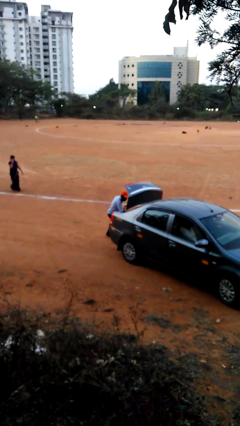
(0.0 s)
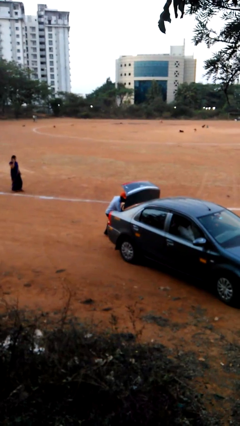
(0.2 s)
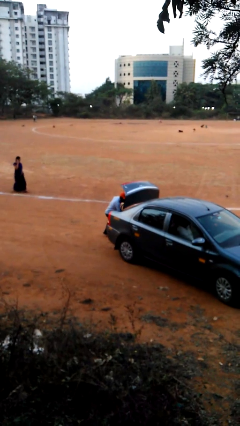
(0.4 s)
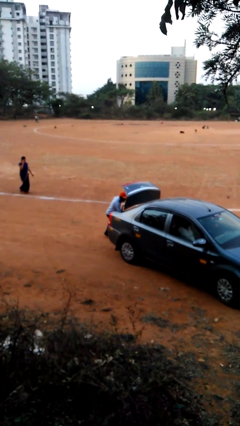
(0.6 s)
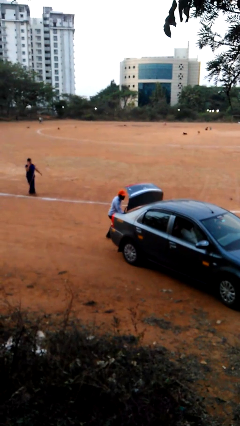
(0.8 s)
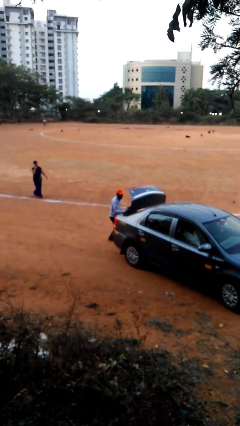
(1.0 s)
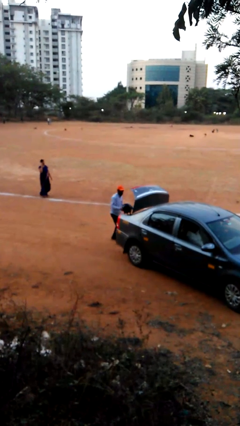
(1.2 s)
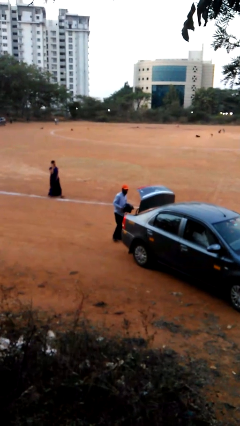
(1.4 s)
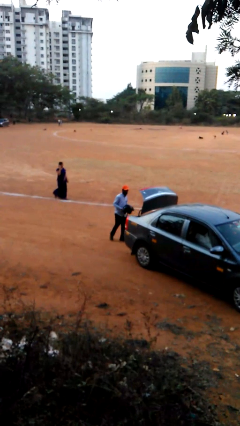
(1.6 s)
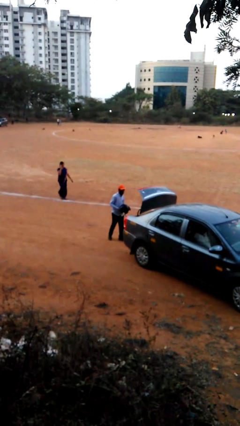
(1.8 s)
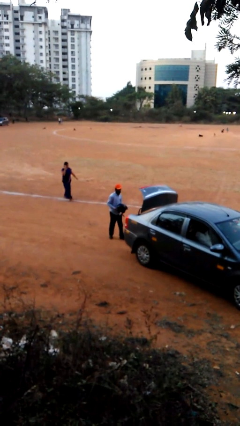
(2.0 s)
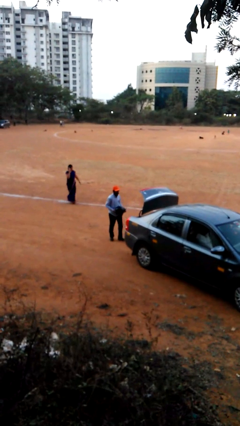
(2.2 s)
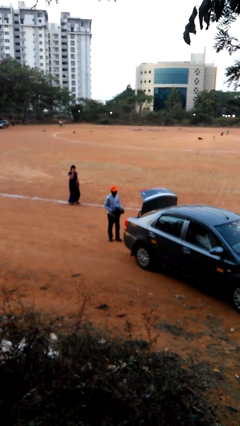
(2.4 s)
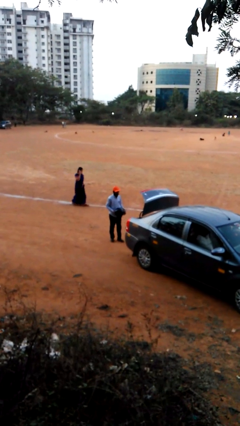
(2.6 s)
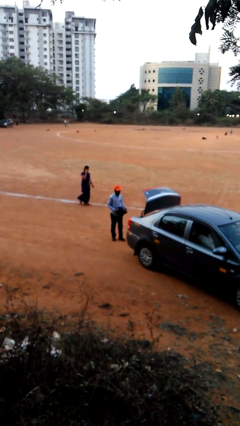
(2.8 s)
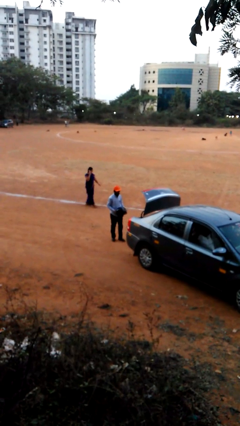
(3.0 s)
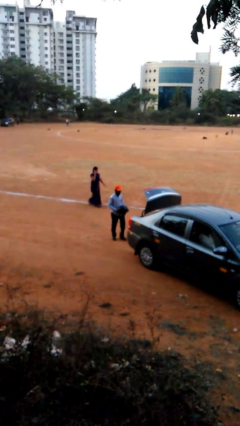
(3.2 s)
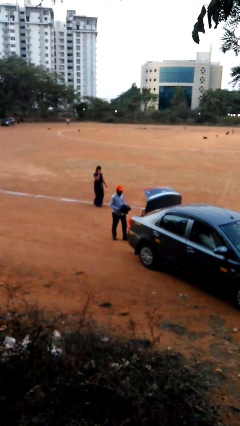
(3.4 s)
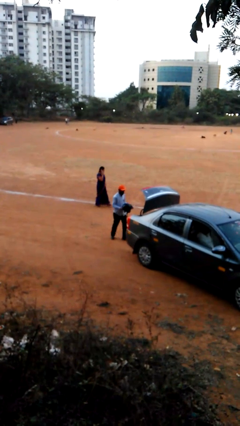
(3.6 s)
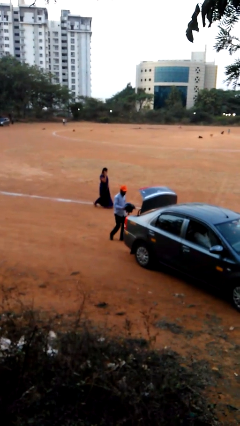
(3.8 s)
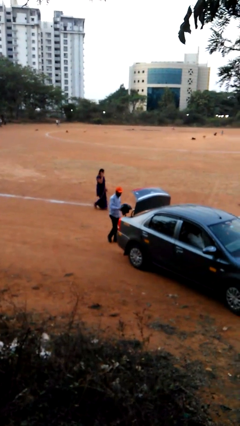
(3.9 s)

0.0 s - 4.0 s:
person unloads car

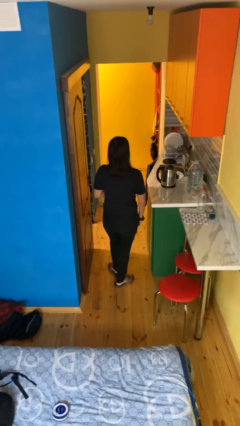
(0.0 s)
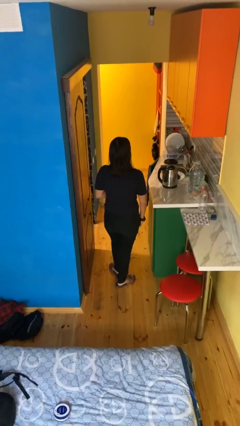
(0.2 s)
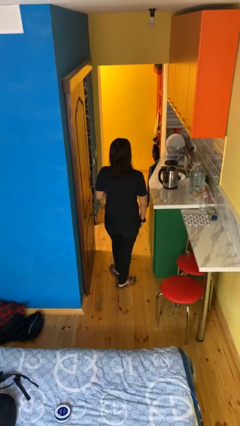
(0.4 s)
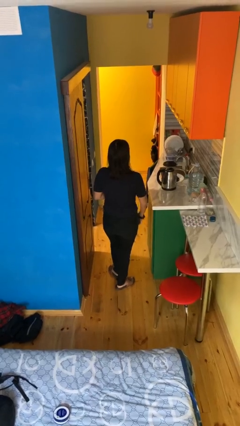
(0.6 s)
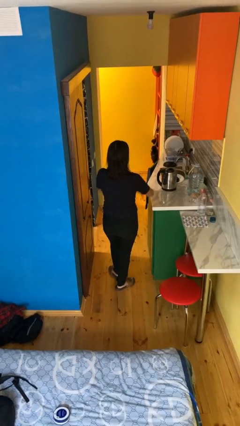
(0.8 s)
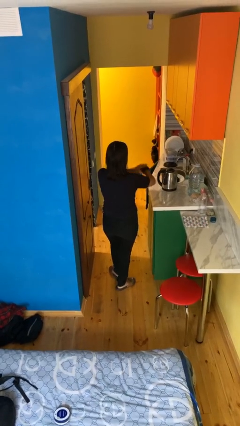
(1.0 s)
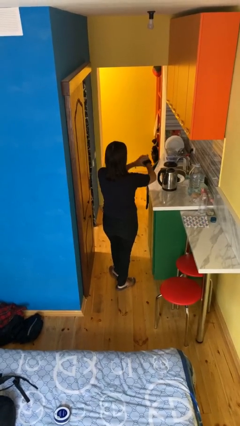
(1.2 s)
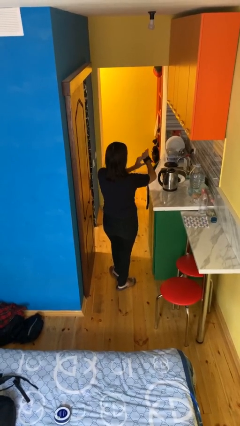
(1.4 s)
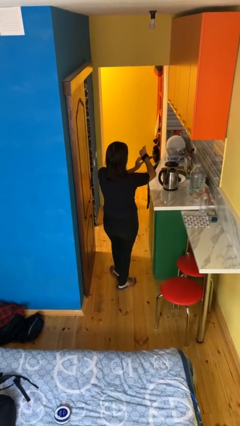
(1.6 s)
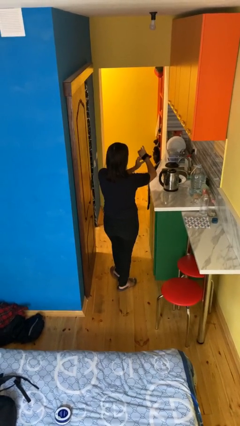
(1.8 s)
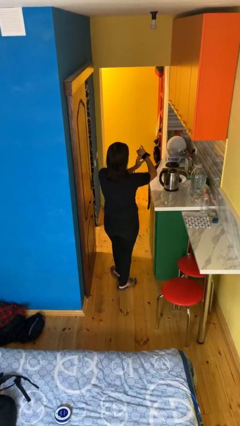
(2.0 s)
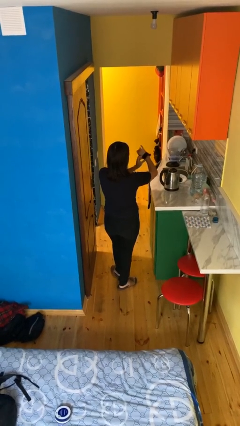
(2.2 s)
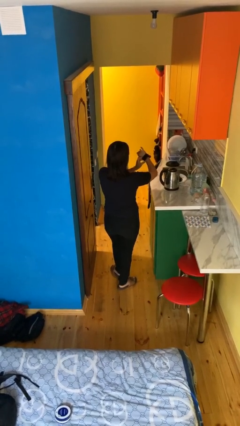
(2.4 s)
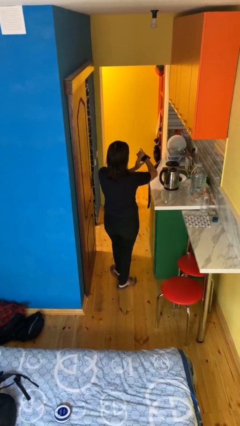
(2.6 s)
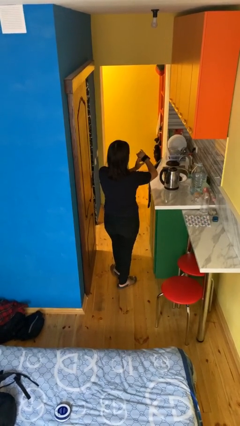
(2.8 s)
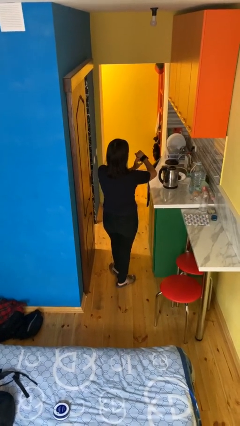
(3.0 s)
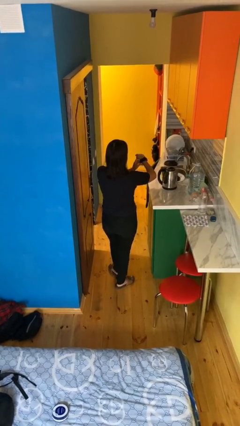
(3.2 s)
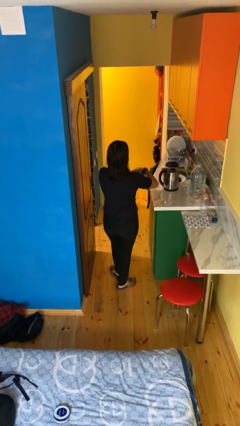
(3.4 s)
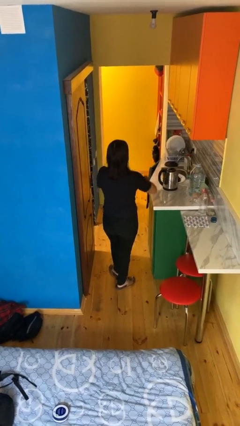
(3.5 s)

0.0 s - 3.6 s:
person looks at wristwatch

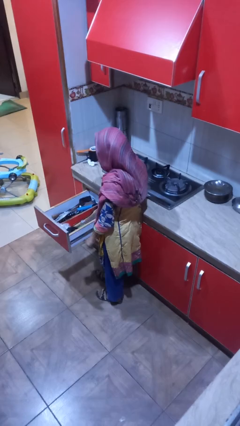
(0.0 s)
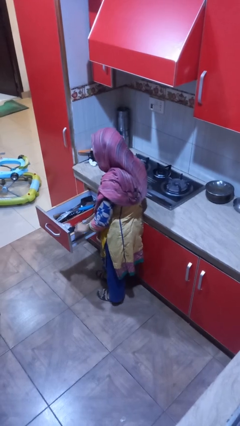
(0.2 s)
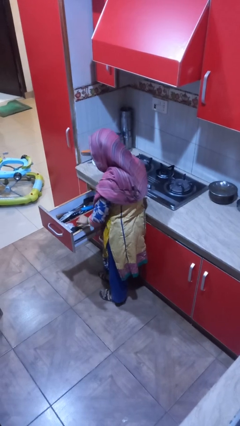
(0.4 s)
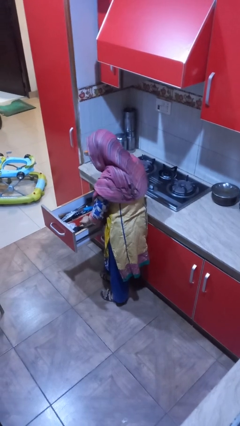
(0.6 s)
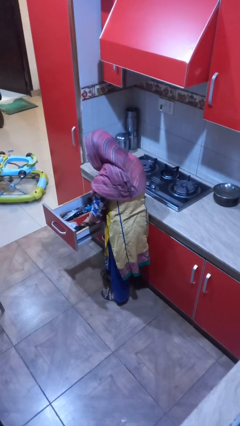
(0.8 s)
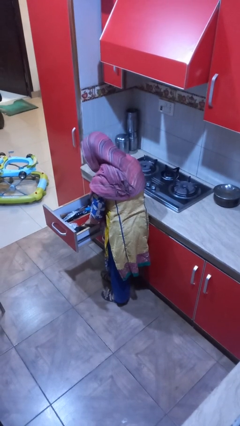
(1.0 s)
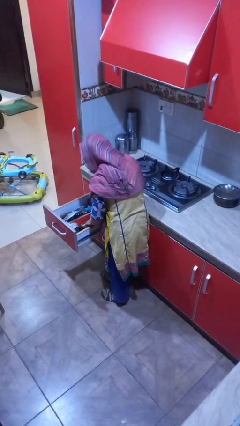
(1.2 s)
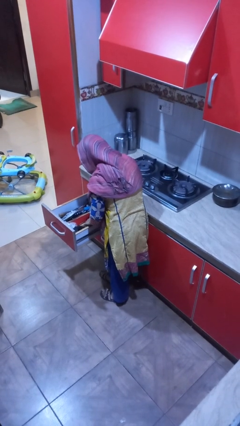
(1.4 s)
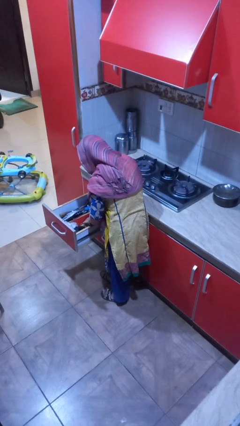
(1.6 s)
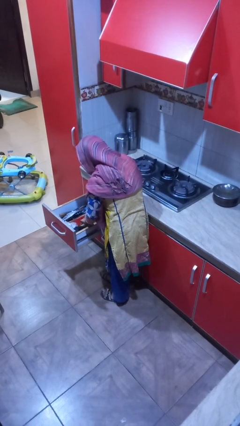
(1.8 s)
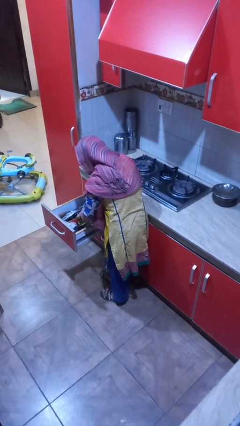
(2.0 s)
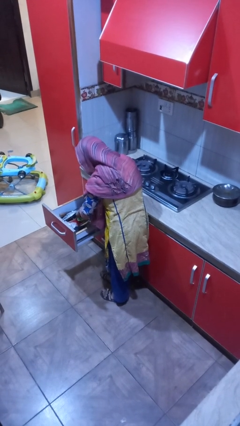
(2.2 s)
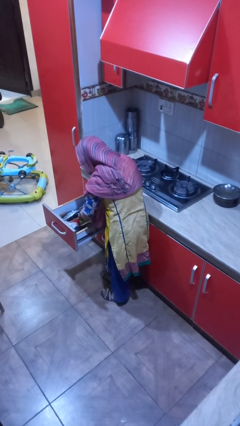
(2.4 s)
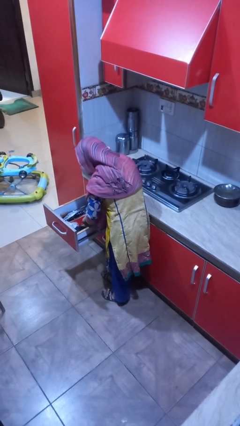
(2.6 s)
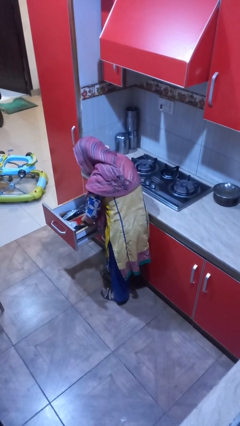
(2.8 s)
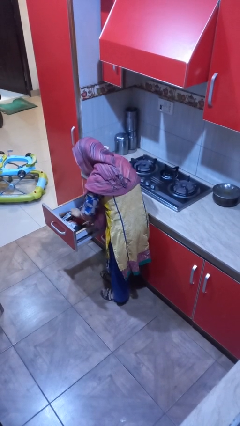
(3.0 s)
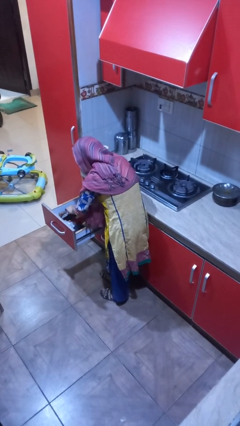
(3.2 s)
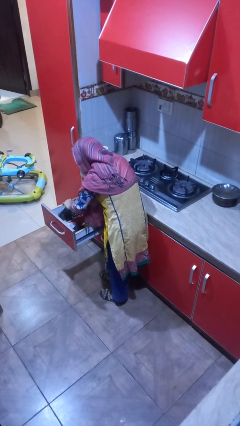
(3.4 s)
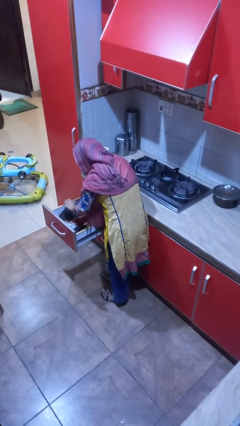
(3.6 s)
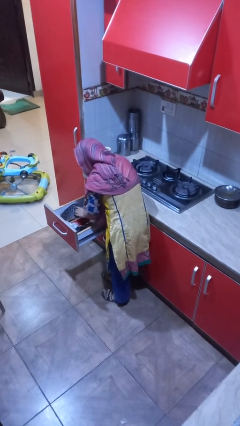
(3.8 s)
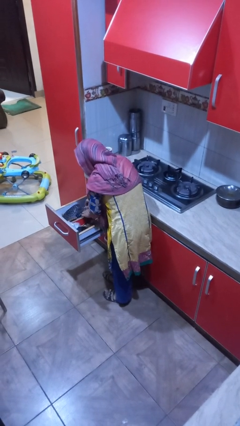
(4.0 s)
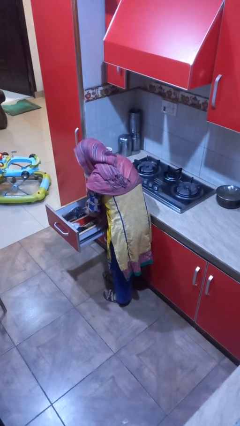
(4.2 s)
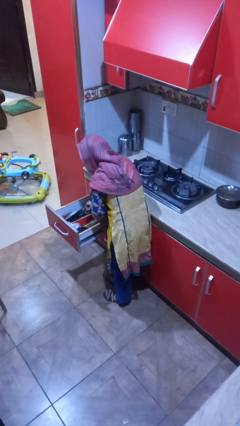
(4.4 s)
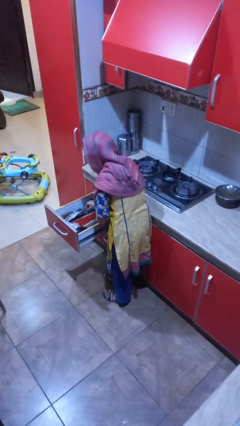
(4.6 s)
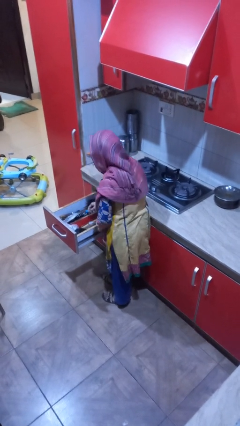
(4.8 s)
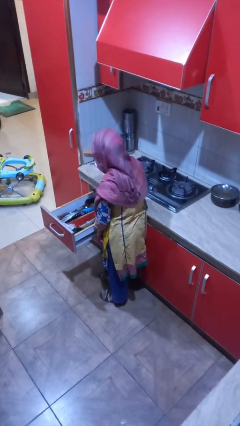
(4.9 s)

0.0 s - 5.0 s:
person searches in kitchen drawer

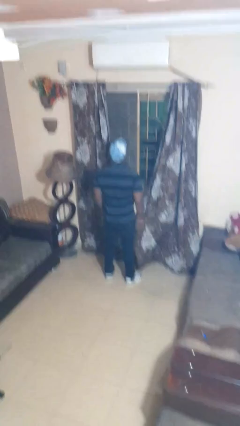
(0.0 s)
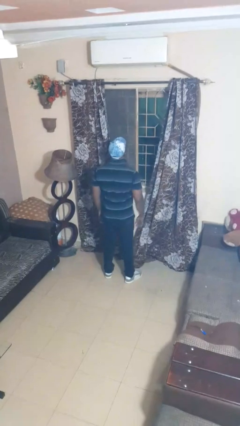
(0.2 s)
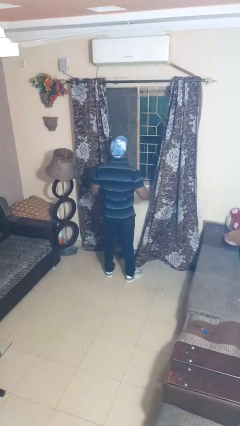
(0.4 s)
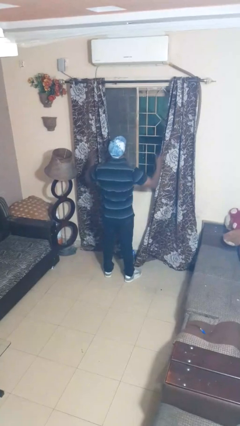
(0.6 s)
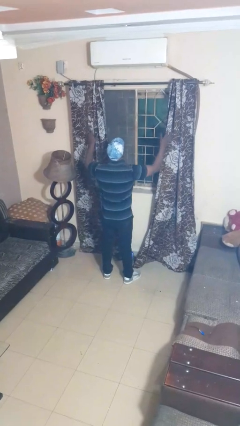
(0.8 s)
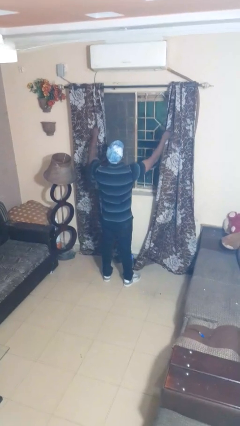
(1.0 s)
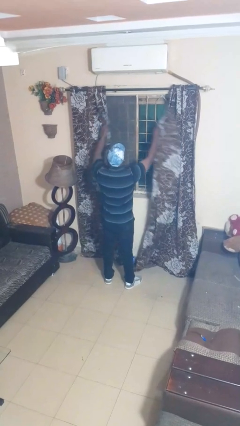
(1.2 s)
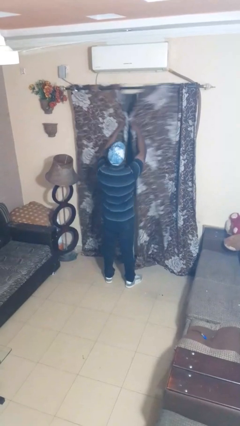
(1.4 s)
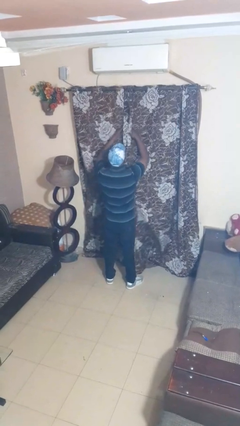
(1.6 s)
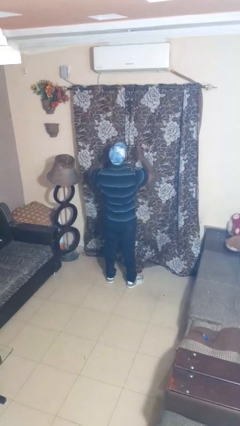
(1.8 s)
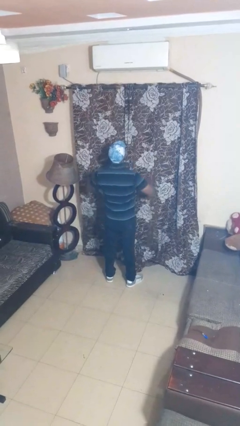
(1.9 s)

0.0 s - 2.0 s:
person closes curtains

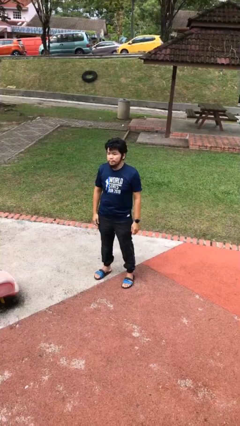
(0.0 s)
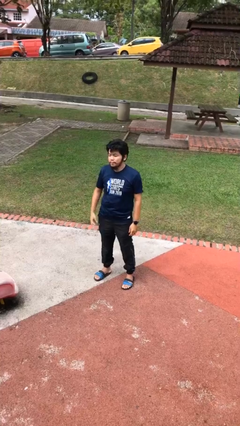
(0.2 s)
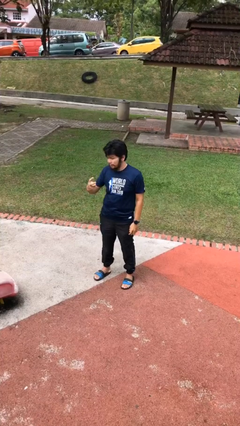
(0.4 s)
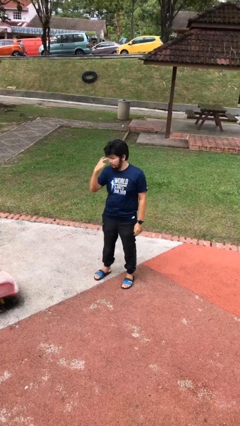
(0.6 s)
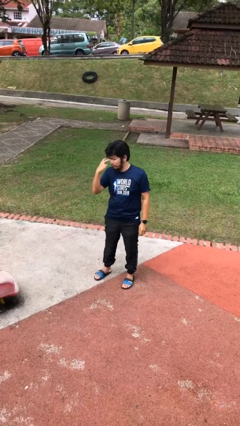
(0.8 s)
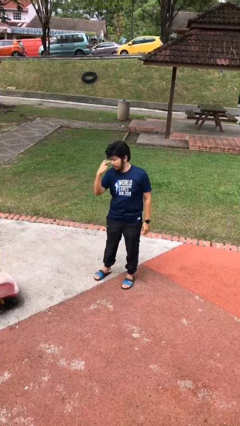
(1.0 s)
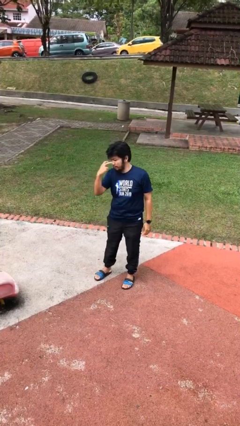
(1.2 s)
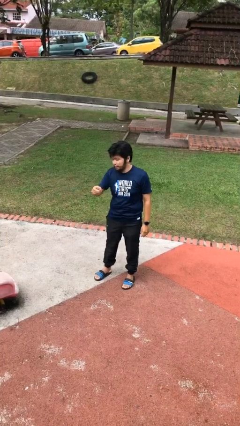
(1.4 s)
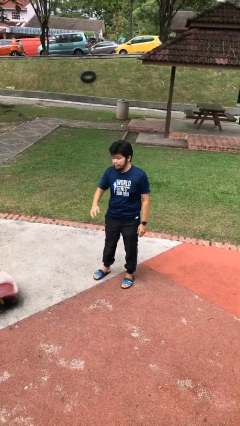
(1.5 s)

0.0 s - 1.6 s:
person gestures watch closely

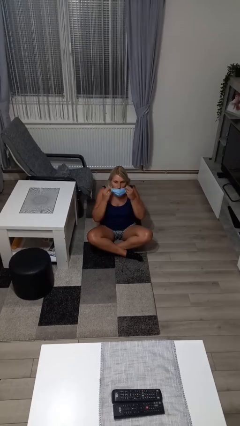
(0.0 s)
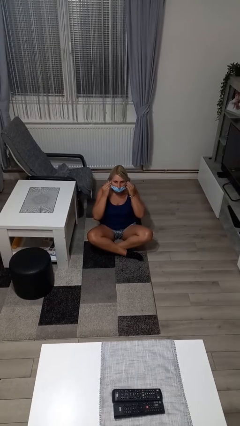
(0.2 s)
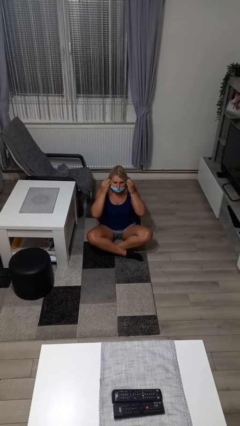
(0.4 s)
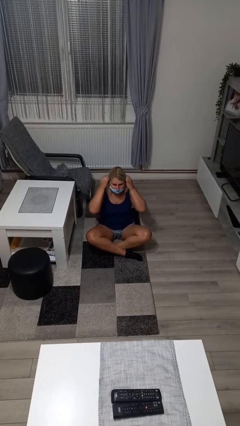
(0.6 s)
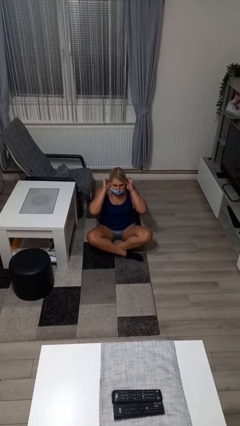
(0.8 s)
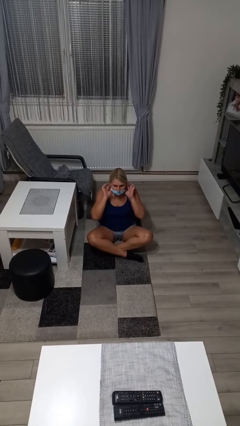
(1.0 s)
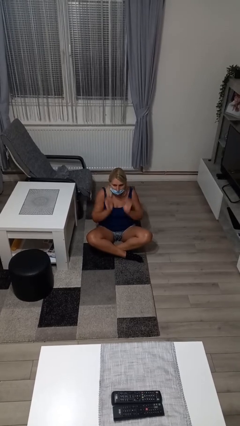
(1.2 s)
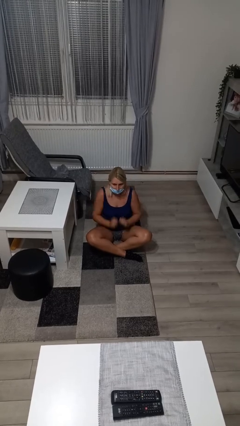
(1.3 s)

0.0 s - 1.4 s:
person puts on facemask
